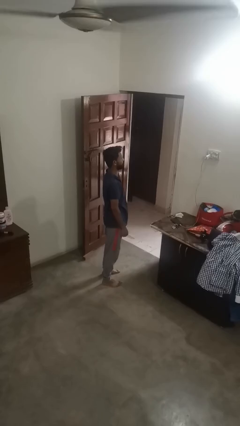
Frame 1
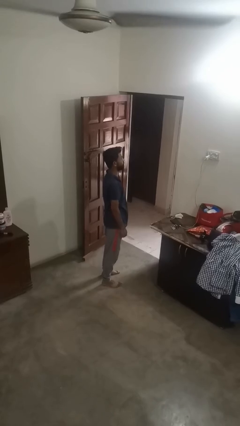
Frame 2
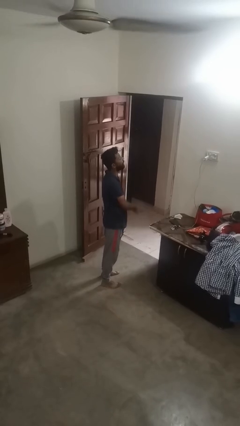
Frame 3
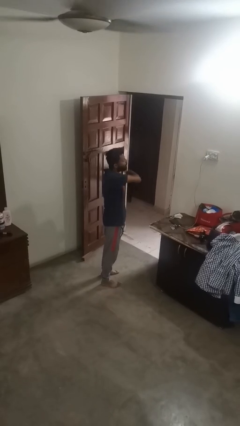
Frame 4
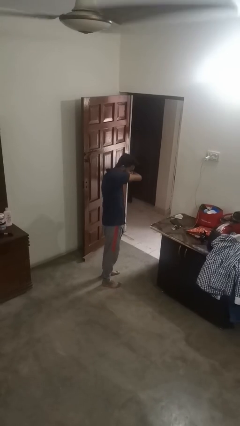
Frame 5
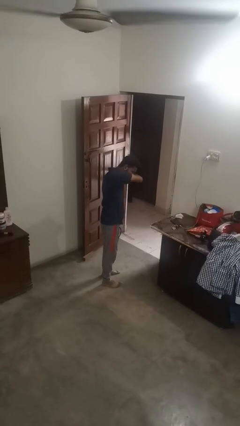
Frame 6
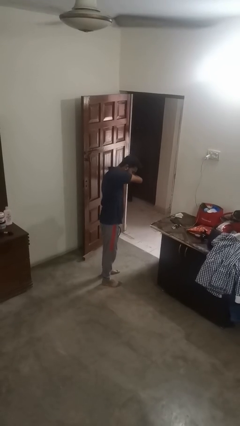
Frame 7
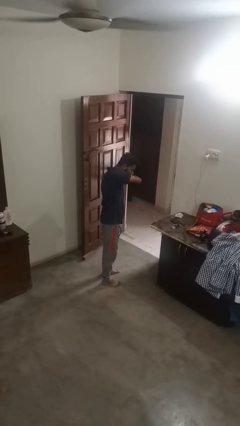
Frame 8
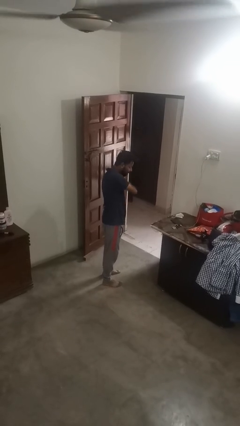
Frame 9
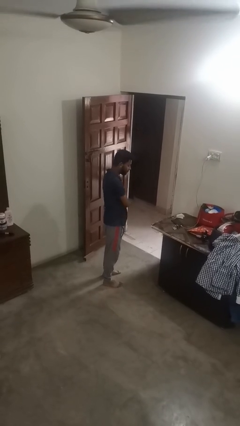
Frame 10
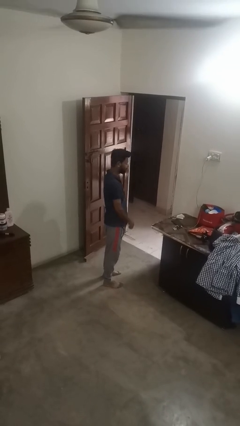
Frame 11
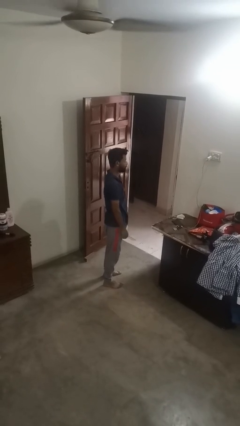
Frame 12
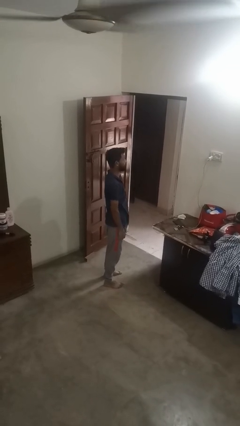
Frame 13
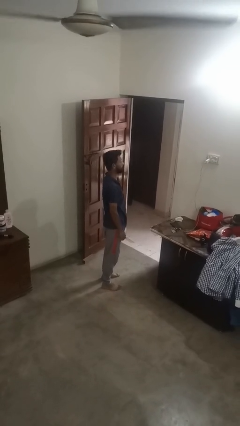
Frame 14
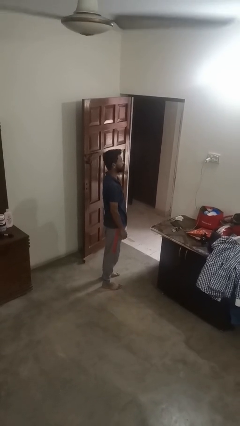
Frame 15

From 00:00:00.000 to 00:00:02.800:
person sneezes into arm

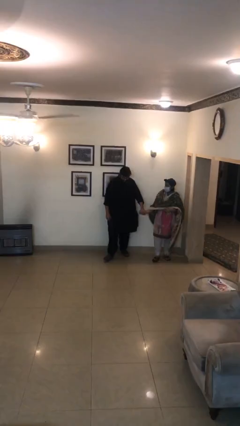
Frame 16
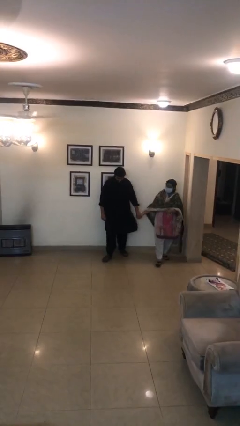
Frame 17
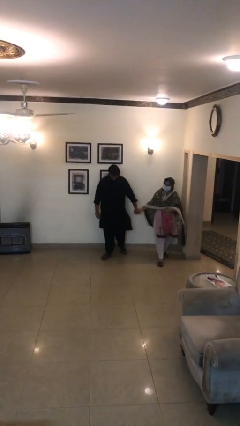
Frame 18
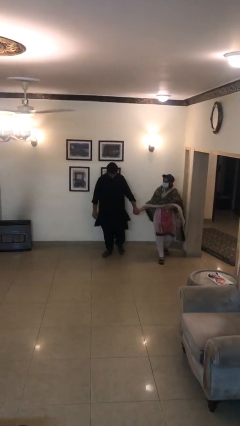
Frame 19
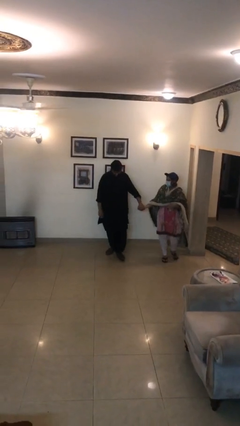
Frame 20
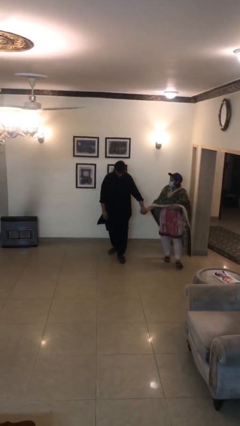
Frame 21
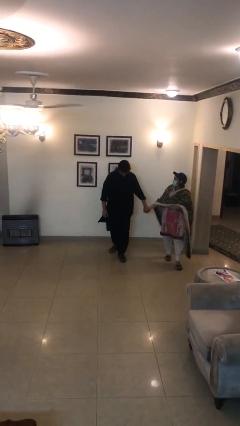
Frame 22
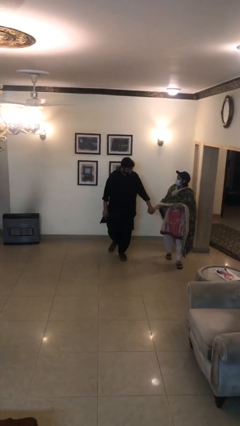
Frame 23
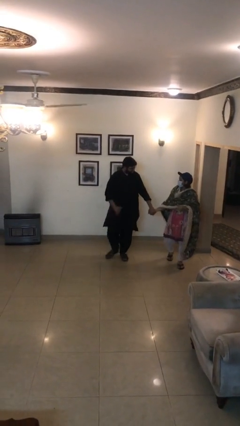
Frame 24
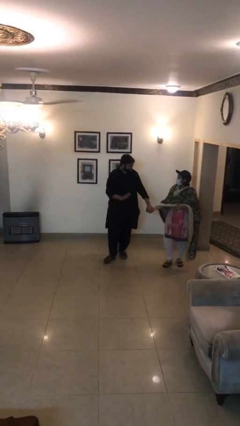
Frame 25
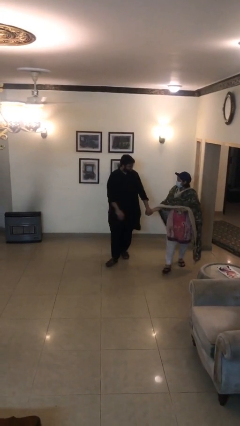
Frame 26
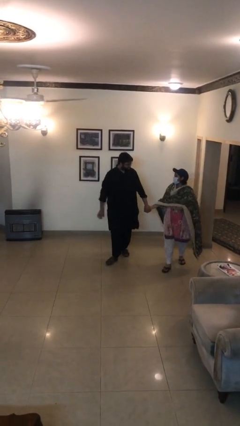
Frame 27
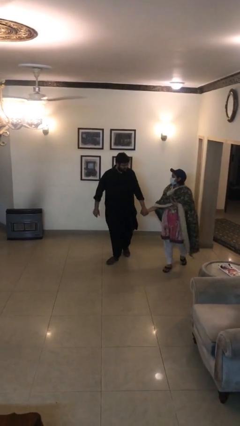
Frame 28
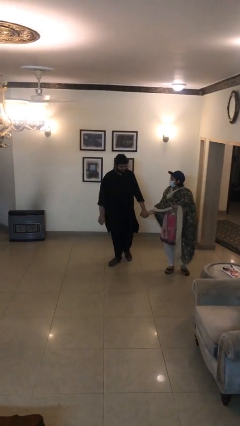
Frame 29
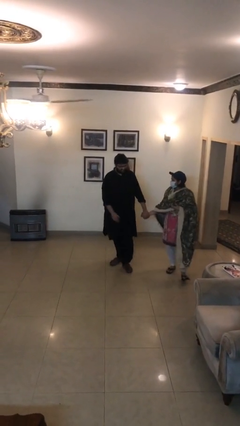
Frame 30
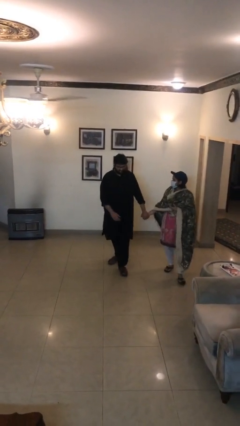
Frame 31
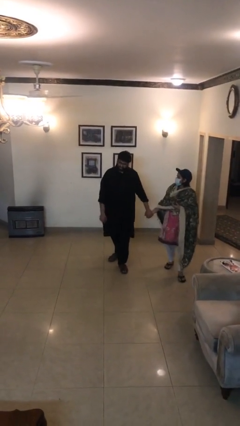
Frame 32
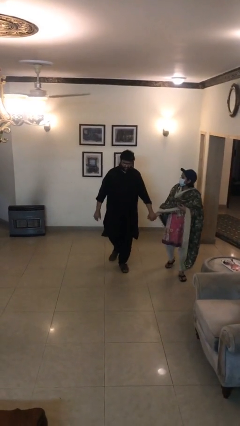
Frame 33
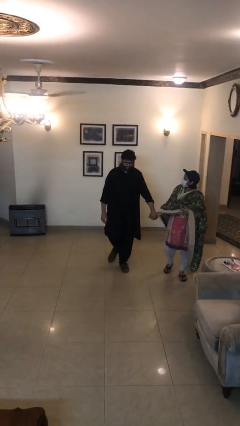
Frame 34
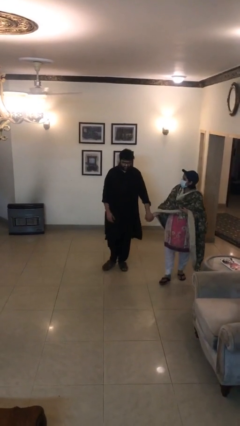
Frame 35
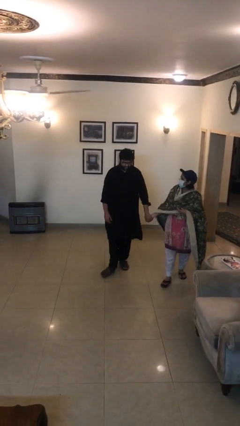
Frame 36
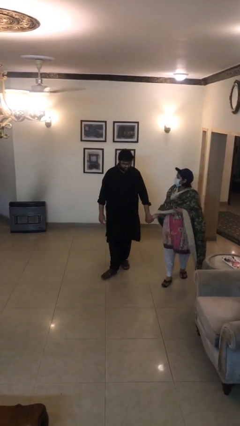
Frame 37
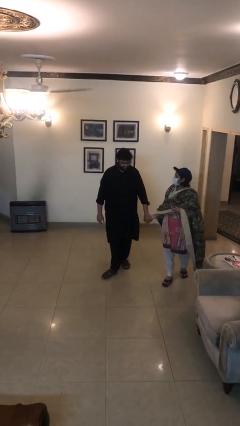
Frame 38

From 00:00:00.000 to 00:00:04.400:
person holds hand

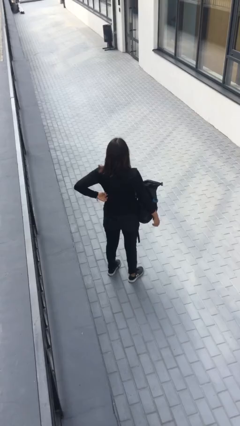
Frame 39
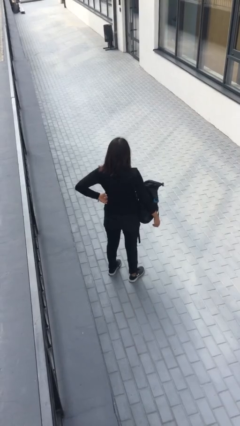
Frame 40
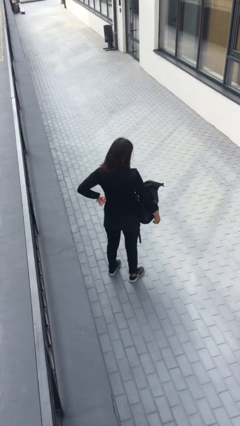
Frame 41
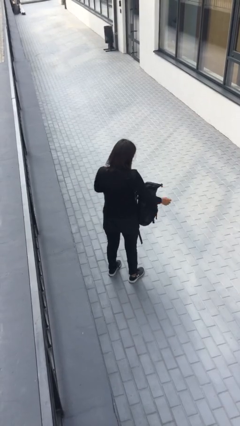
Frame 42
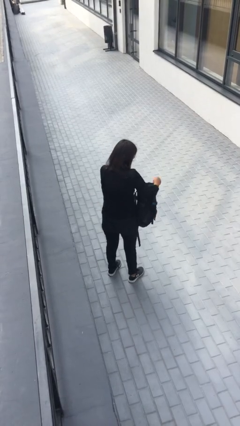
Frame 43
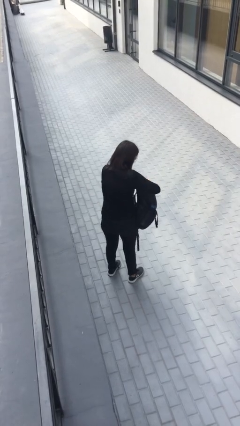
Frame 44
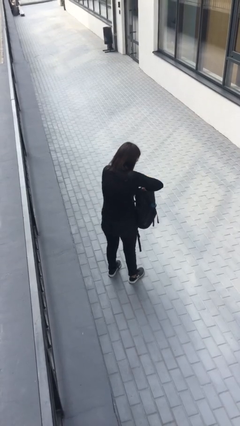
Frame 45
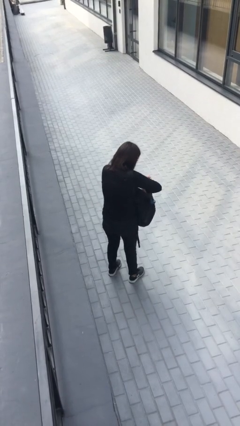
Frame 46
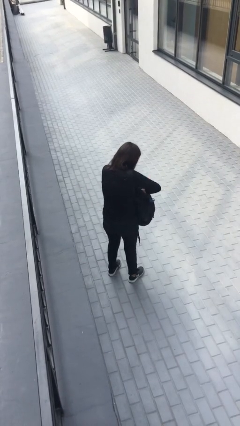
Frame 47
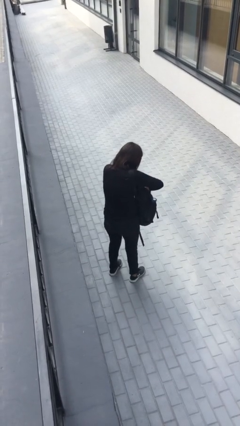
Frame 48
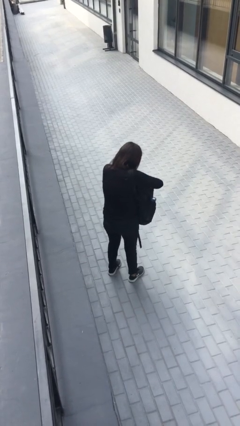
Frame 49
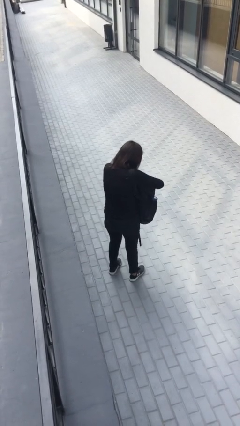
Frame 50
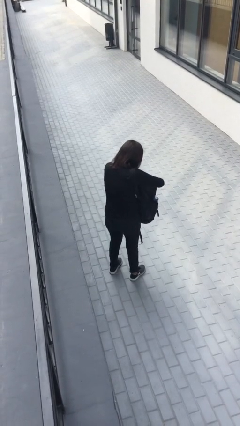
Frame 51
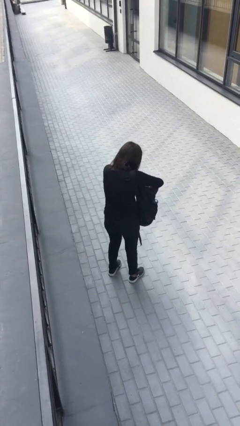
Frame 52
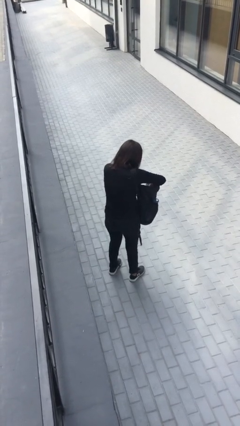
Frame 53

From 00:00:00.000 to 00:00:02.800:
person searches in backpack

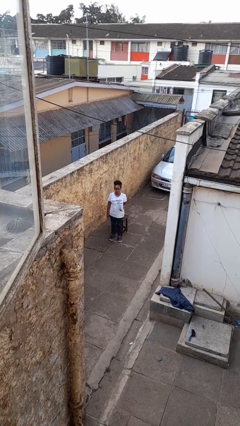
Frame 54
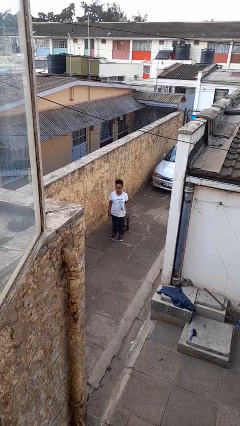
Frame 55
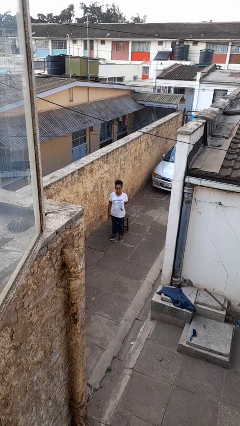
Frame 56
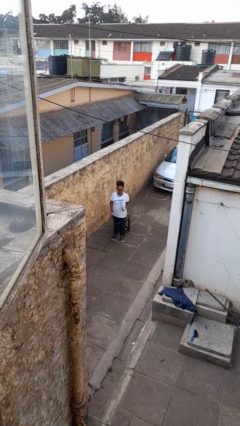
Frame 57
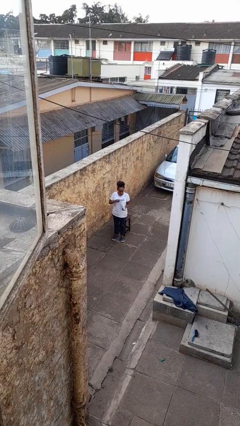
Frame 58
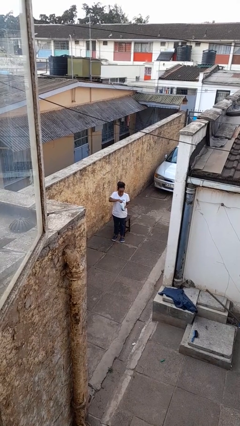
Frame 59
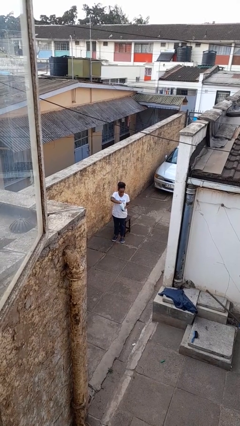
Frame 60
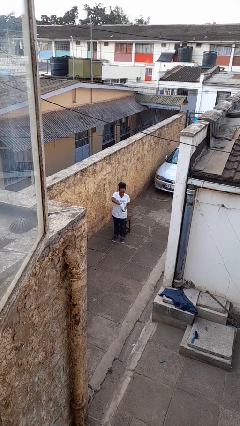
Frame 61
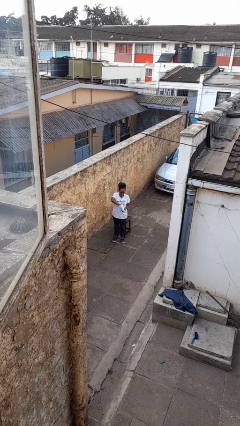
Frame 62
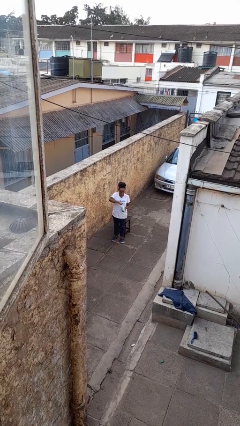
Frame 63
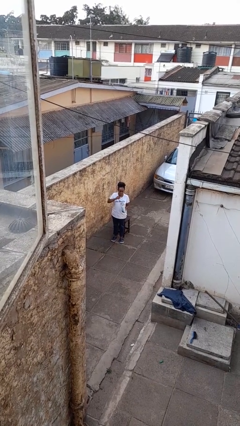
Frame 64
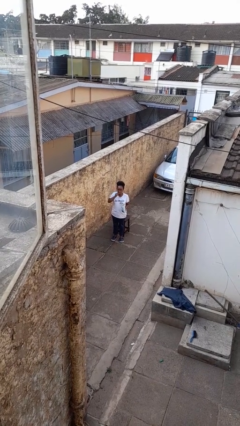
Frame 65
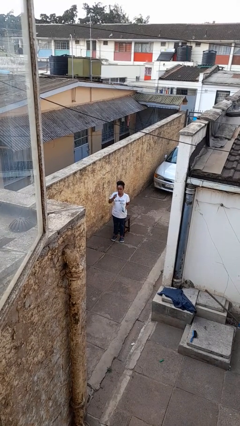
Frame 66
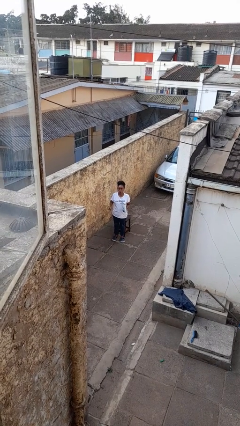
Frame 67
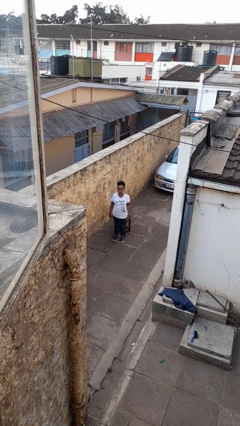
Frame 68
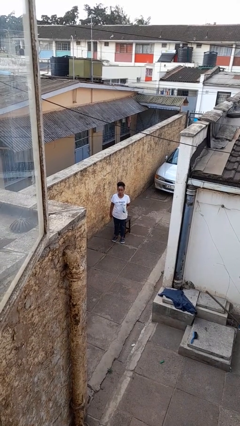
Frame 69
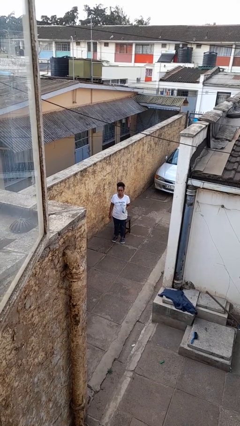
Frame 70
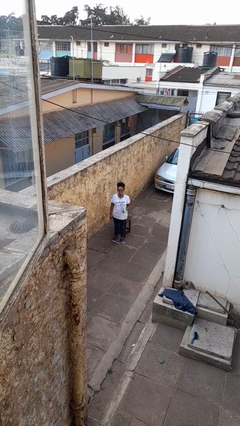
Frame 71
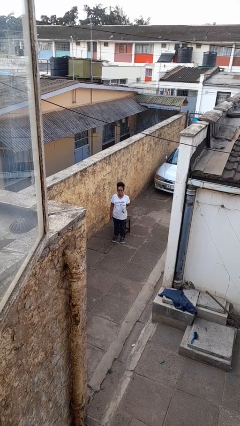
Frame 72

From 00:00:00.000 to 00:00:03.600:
person eats snack from bag

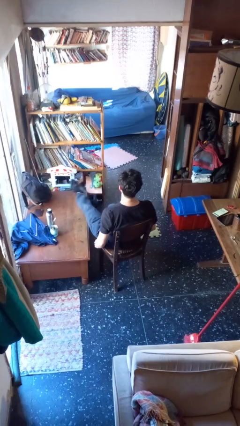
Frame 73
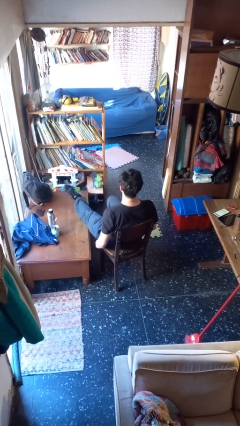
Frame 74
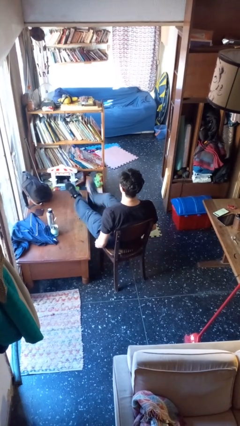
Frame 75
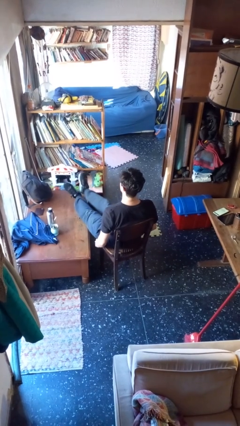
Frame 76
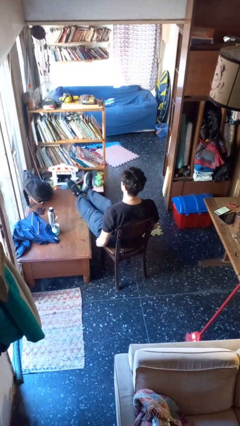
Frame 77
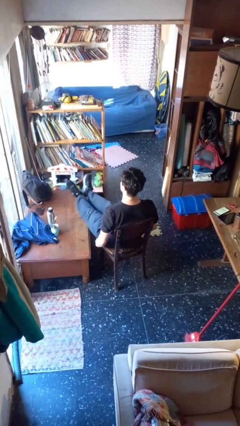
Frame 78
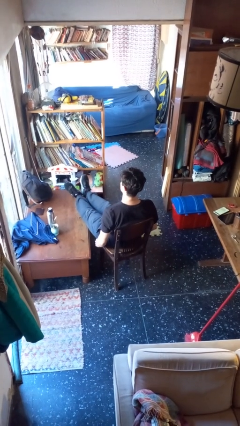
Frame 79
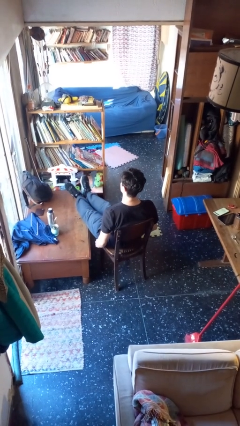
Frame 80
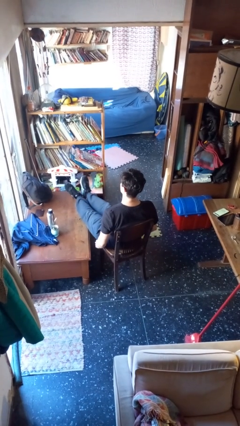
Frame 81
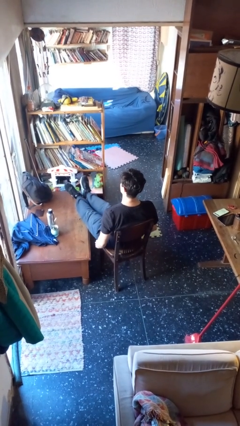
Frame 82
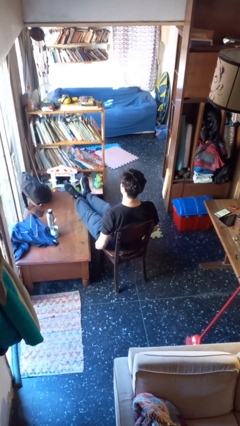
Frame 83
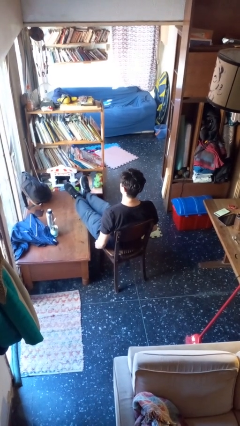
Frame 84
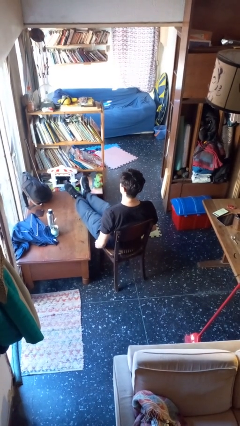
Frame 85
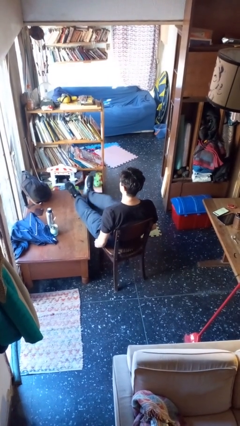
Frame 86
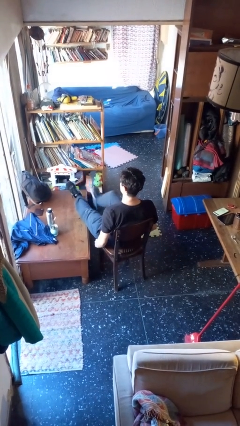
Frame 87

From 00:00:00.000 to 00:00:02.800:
person puts feet up

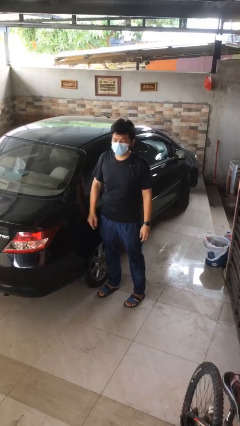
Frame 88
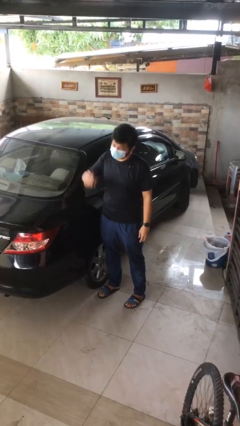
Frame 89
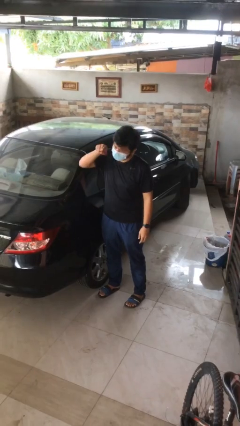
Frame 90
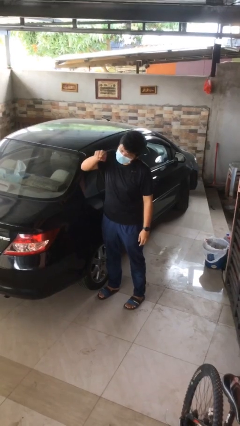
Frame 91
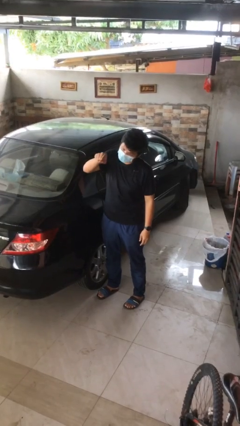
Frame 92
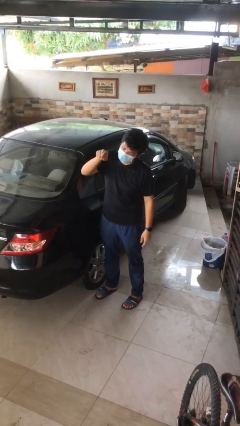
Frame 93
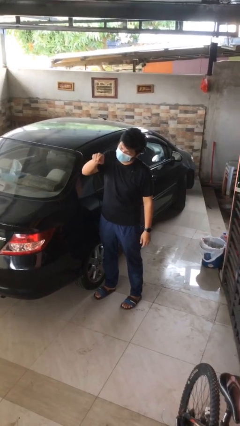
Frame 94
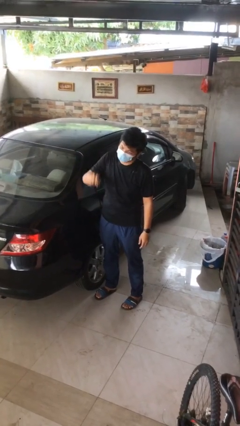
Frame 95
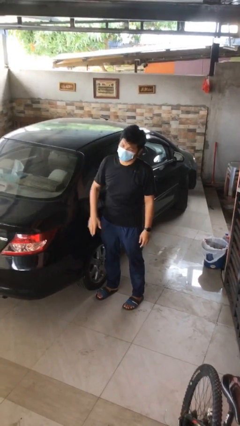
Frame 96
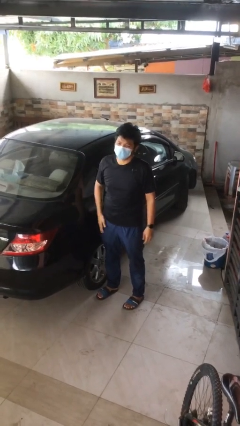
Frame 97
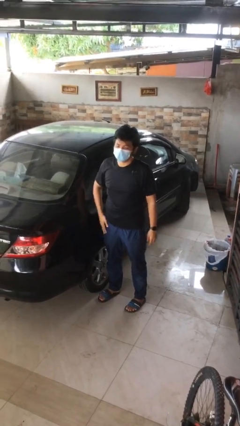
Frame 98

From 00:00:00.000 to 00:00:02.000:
person points at person
